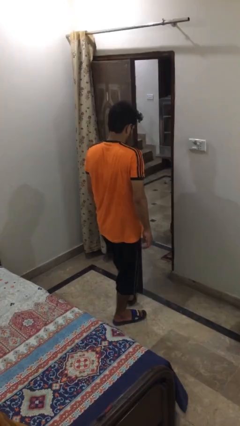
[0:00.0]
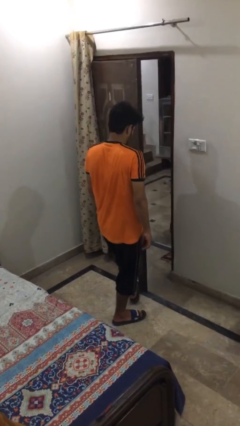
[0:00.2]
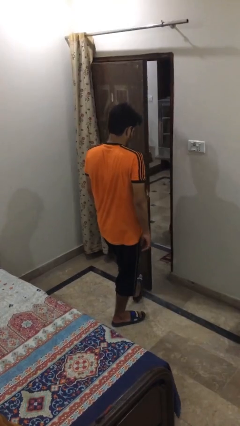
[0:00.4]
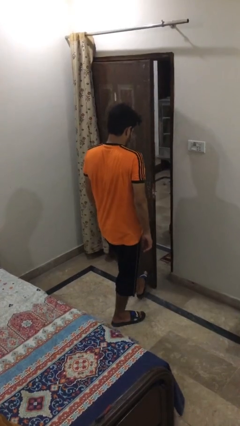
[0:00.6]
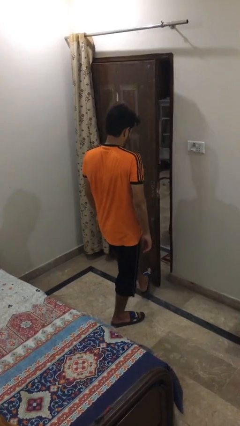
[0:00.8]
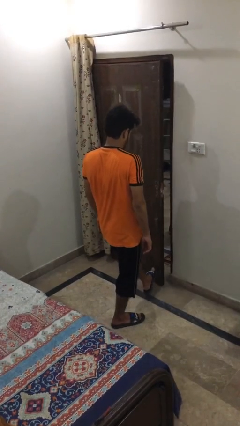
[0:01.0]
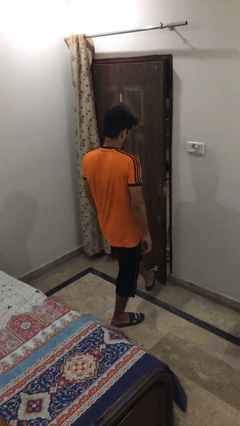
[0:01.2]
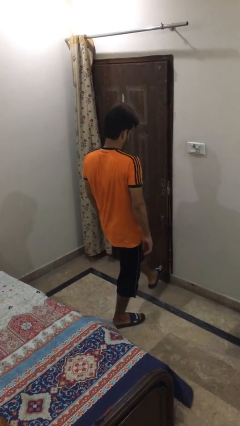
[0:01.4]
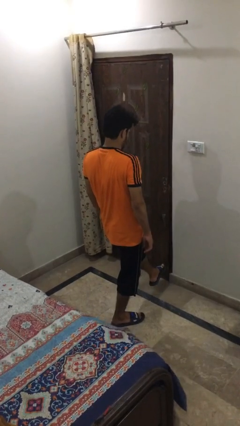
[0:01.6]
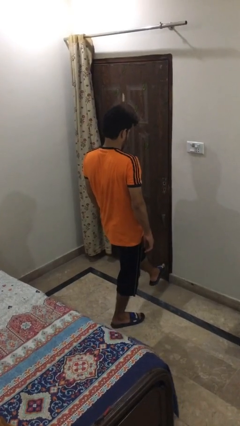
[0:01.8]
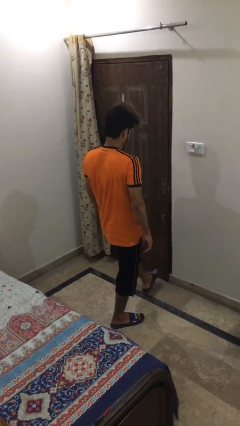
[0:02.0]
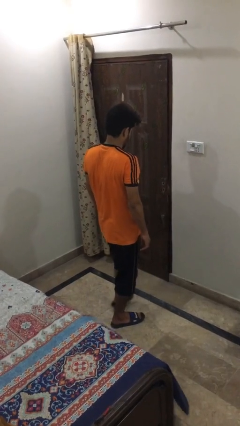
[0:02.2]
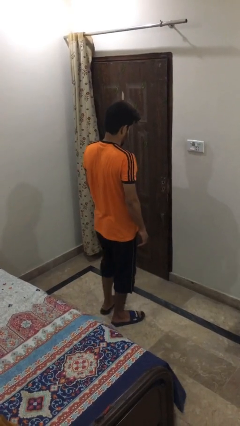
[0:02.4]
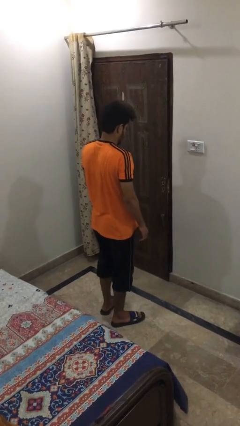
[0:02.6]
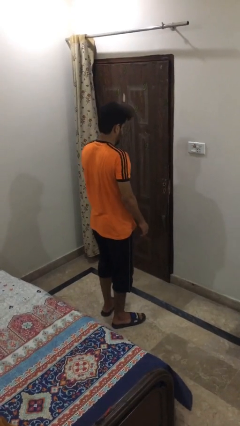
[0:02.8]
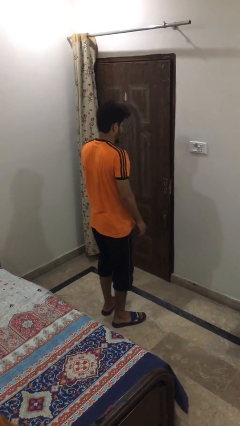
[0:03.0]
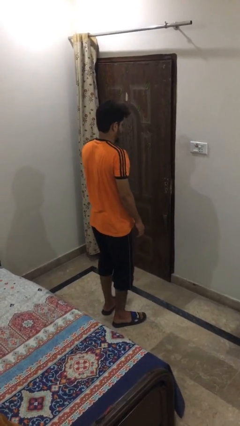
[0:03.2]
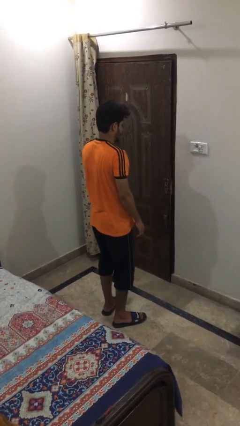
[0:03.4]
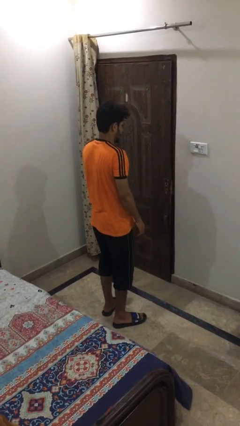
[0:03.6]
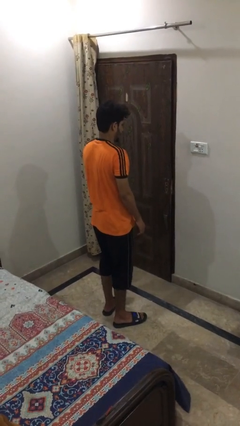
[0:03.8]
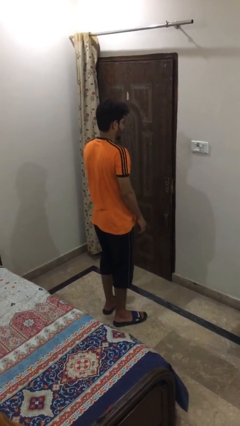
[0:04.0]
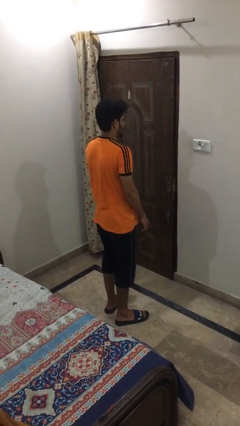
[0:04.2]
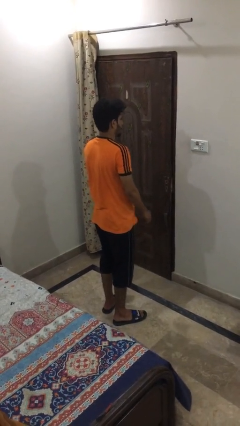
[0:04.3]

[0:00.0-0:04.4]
person closes door with foot

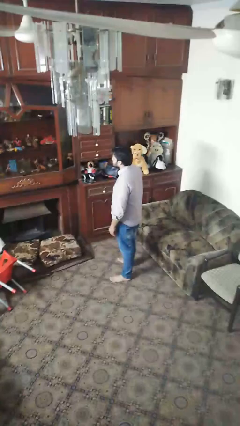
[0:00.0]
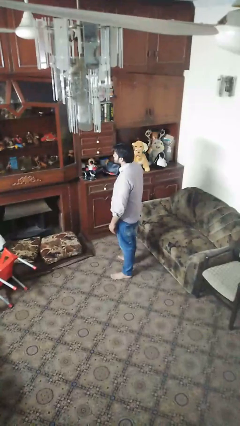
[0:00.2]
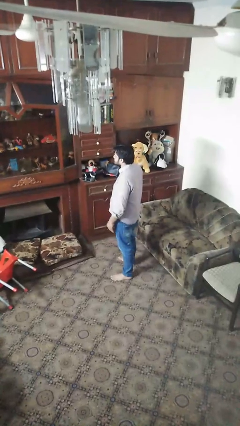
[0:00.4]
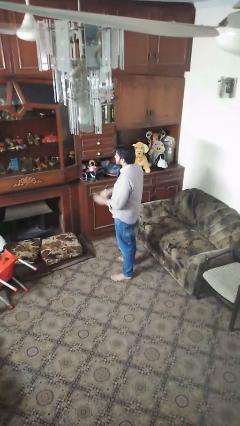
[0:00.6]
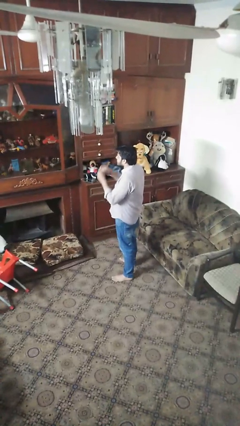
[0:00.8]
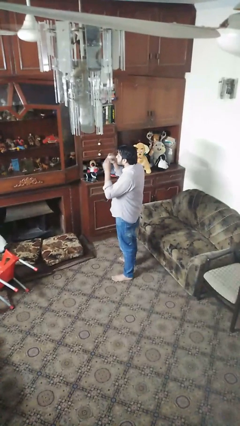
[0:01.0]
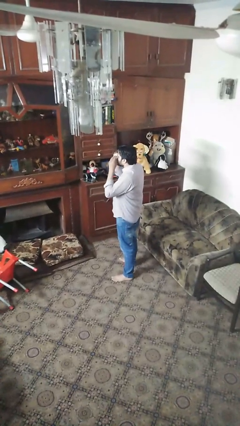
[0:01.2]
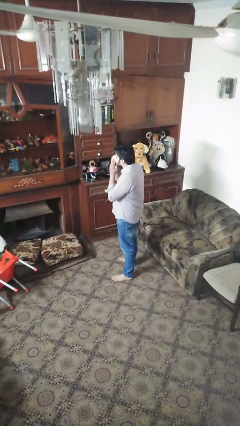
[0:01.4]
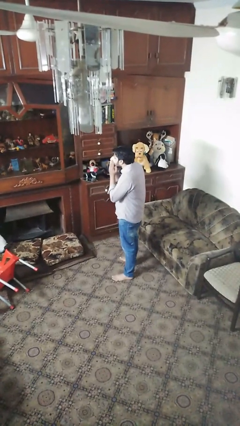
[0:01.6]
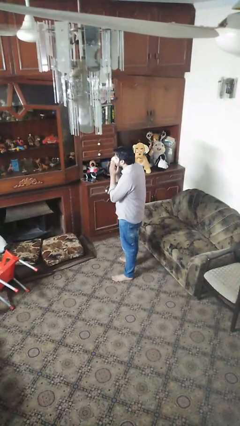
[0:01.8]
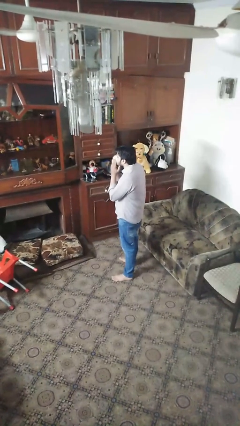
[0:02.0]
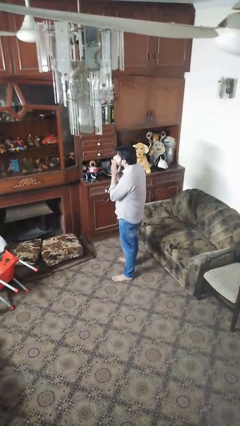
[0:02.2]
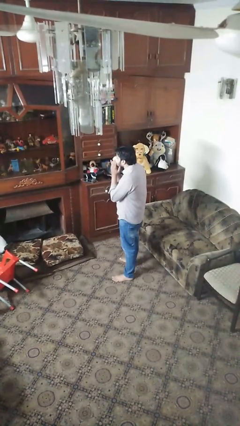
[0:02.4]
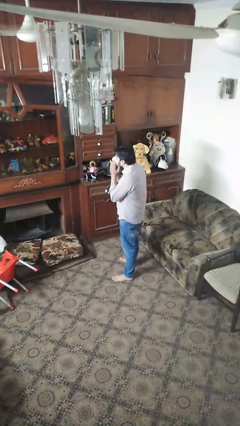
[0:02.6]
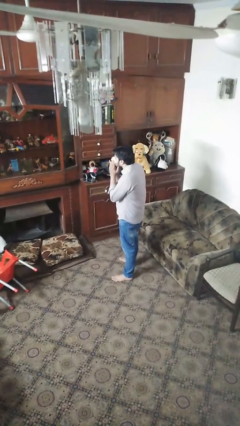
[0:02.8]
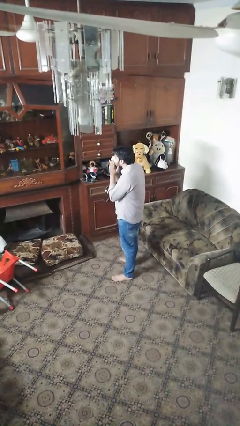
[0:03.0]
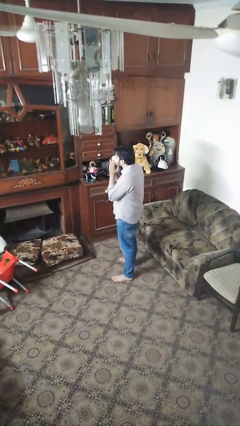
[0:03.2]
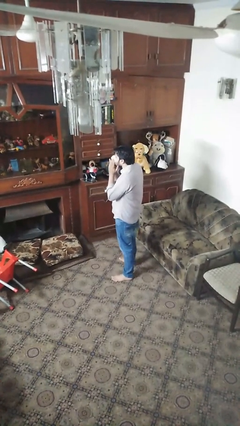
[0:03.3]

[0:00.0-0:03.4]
person blows nose

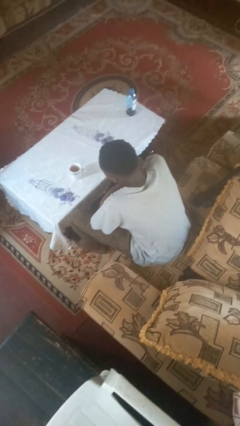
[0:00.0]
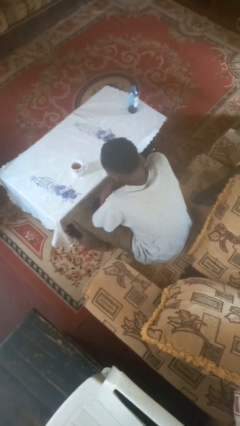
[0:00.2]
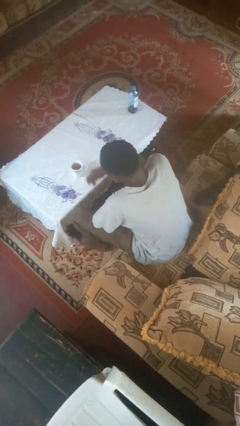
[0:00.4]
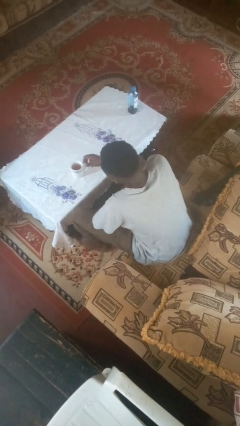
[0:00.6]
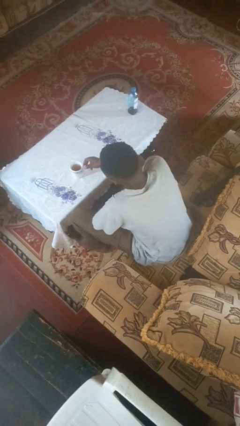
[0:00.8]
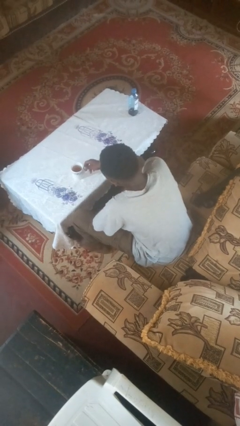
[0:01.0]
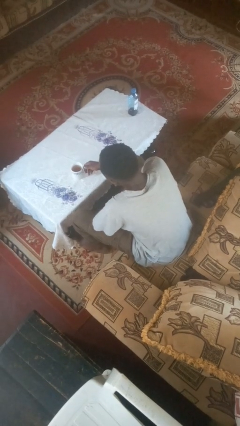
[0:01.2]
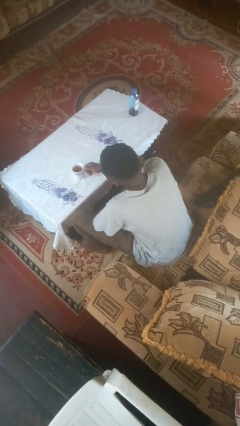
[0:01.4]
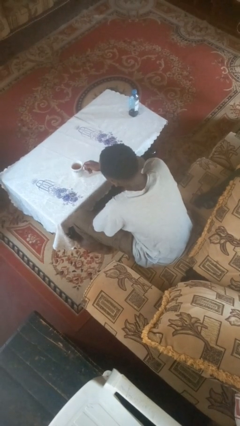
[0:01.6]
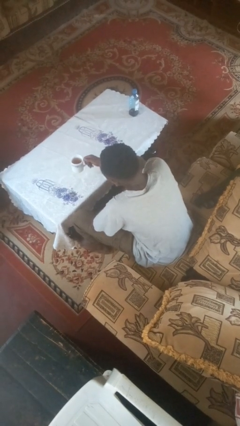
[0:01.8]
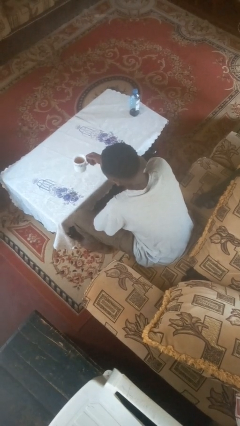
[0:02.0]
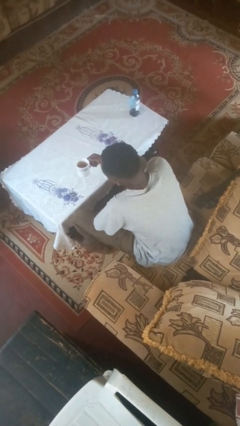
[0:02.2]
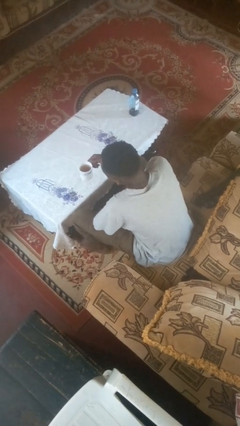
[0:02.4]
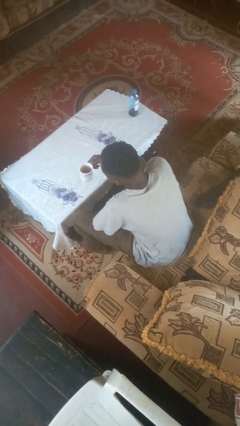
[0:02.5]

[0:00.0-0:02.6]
person picks up object from table

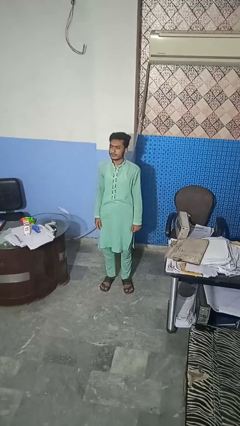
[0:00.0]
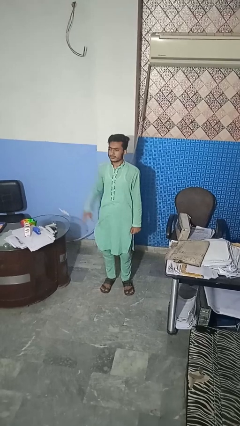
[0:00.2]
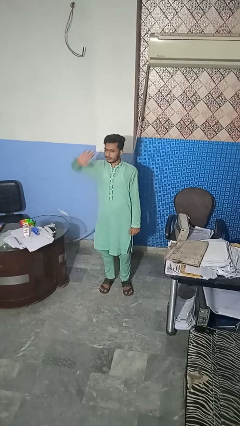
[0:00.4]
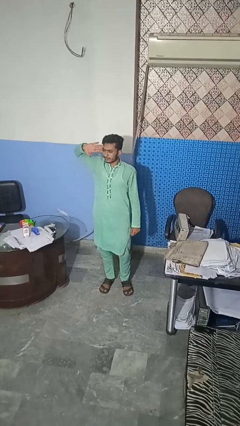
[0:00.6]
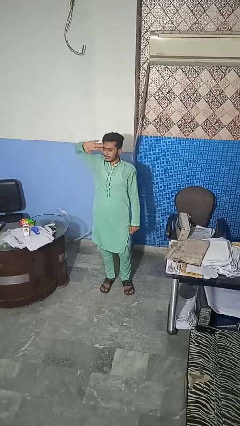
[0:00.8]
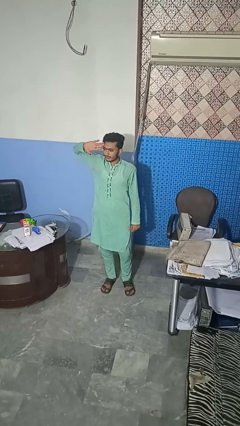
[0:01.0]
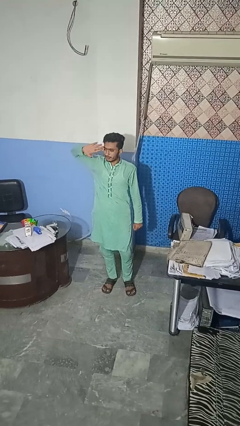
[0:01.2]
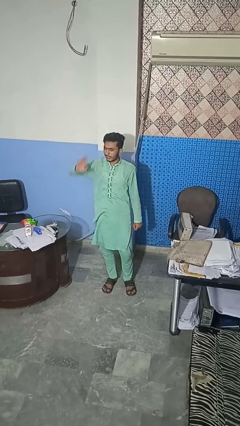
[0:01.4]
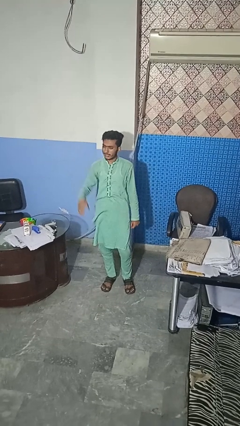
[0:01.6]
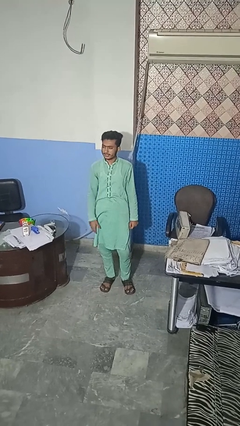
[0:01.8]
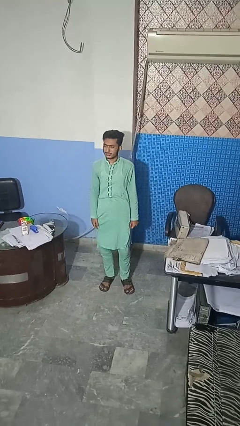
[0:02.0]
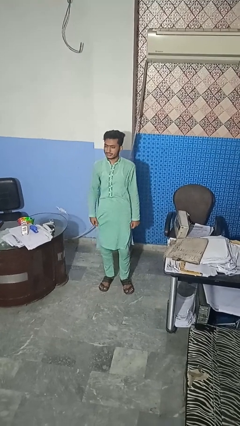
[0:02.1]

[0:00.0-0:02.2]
person salutes

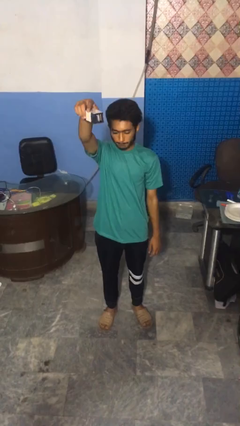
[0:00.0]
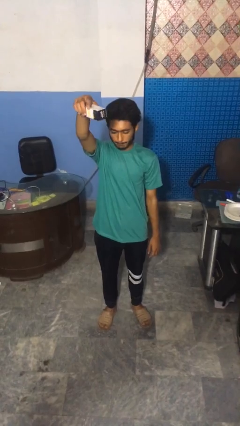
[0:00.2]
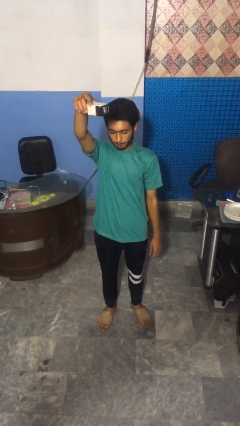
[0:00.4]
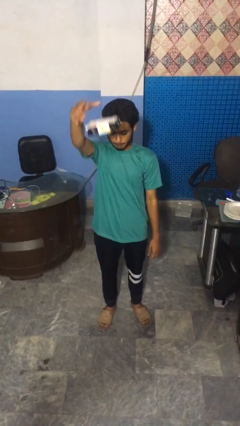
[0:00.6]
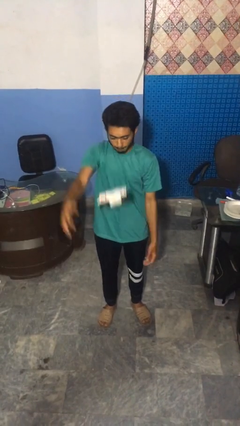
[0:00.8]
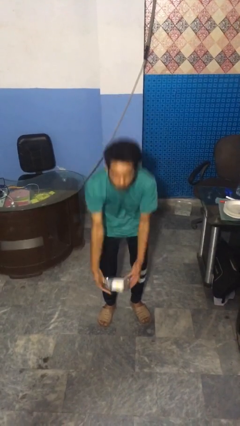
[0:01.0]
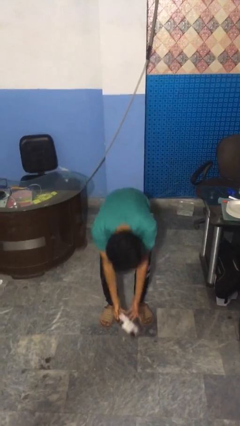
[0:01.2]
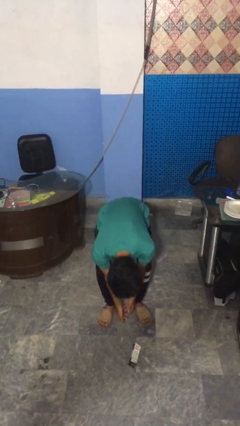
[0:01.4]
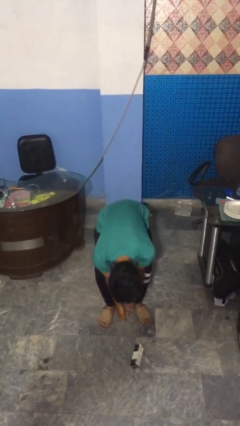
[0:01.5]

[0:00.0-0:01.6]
person drops object

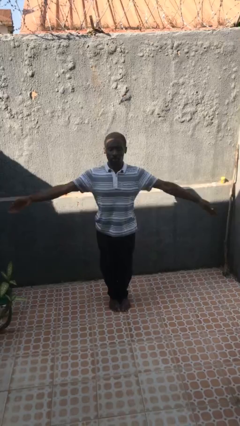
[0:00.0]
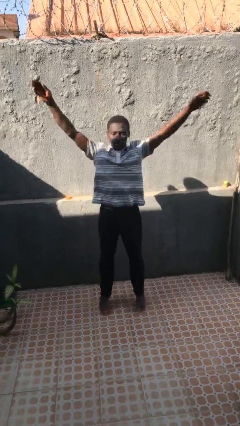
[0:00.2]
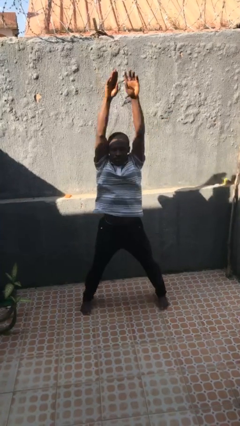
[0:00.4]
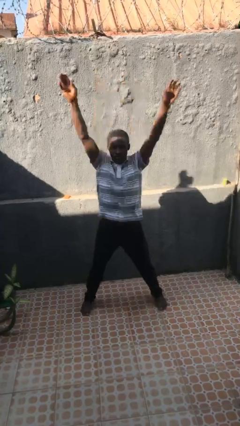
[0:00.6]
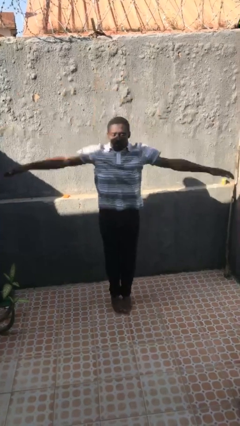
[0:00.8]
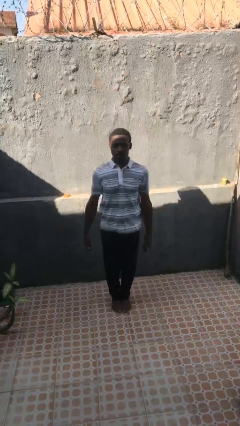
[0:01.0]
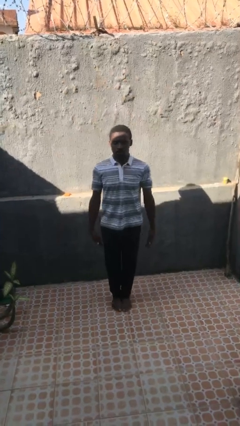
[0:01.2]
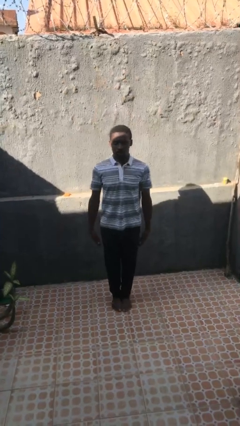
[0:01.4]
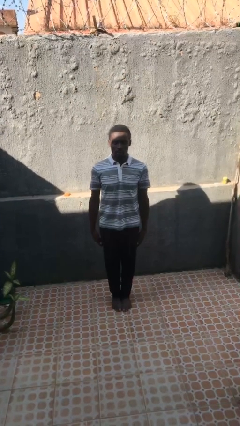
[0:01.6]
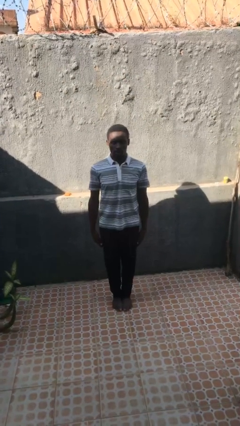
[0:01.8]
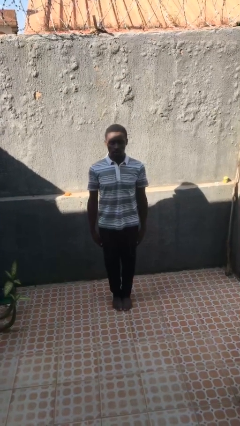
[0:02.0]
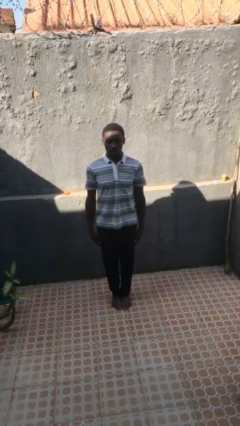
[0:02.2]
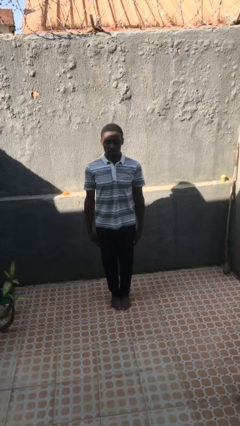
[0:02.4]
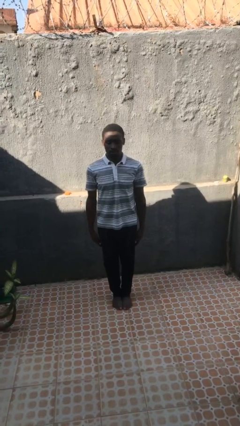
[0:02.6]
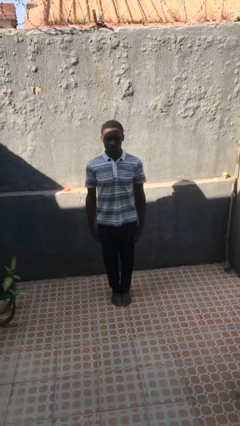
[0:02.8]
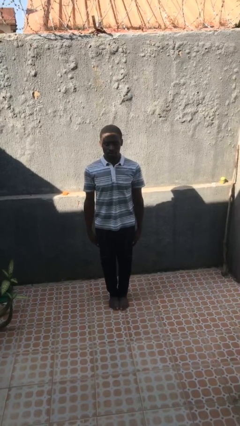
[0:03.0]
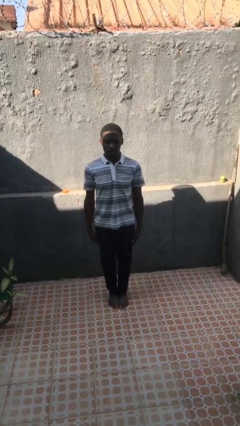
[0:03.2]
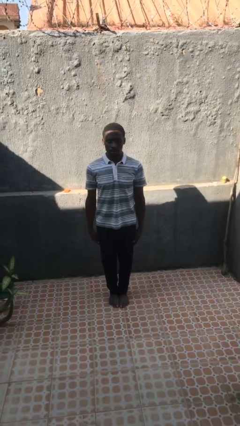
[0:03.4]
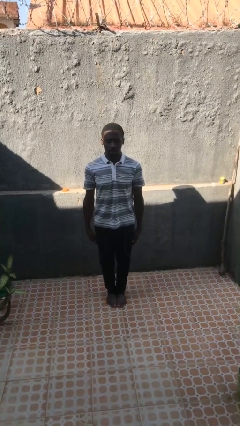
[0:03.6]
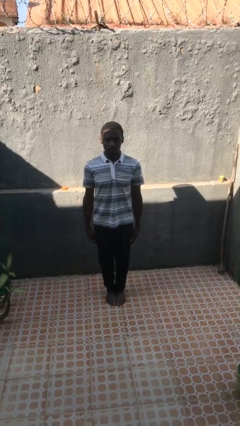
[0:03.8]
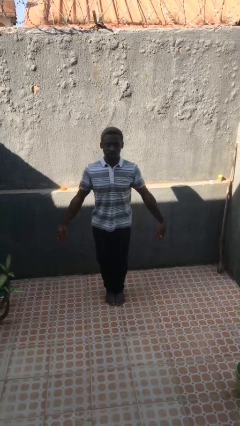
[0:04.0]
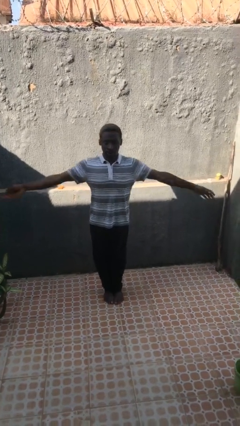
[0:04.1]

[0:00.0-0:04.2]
person exercises with jumping jacks
